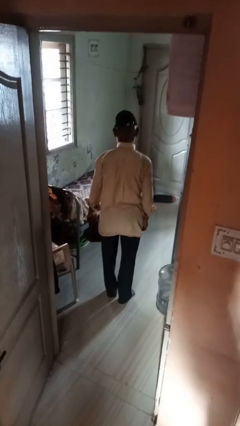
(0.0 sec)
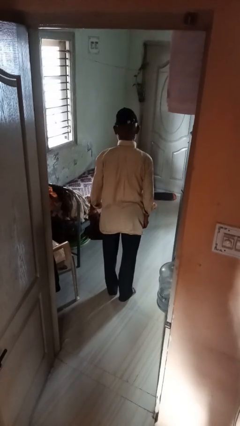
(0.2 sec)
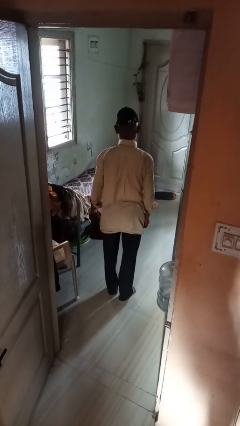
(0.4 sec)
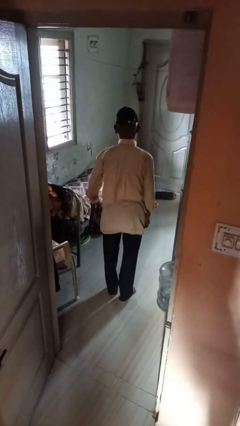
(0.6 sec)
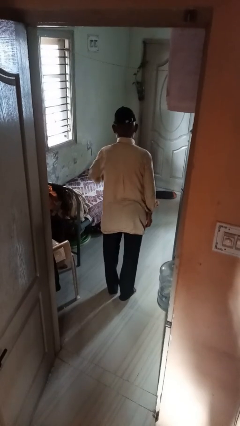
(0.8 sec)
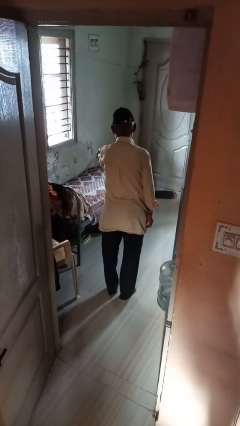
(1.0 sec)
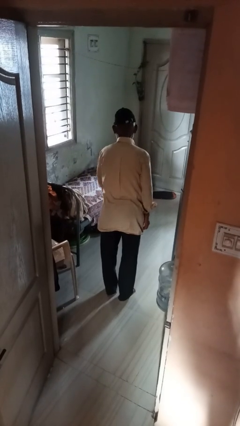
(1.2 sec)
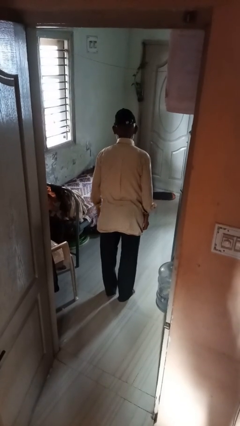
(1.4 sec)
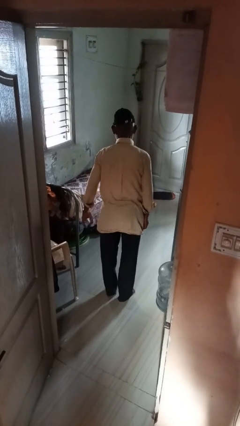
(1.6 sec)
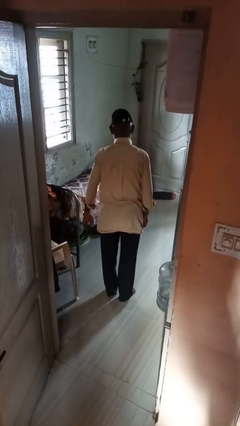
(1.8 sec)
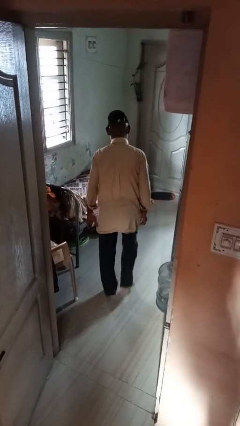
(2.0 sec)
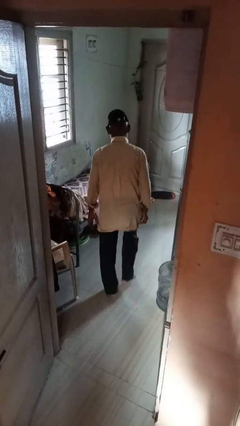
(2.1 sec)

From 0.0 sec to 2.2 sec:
person throws object on bed

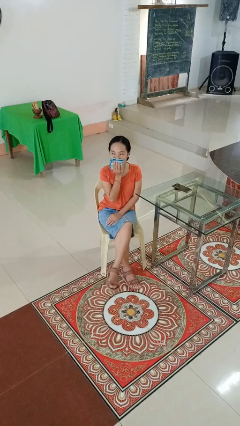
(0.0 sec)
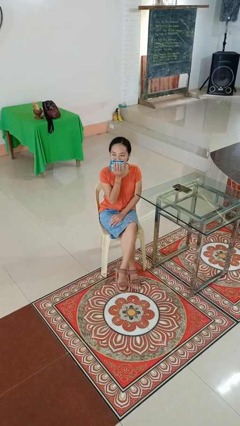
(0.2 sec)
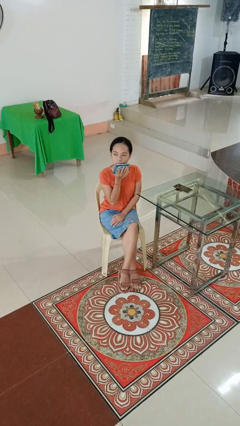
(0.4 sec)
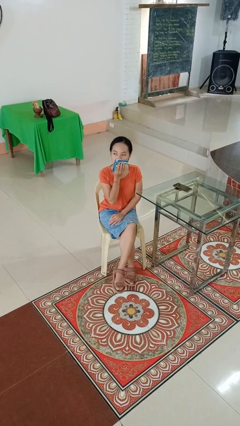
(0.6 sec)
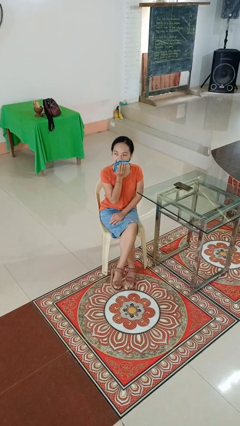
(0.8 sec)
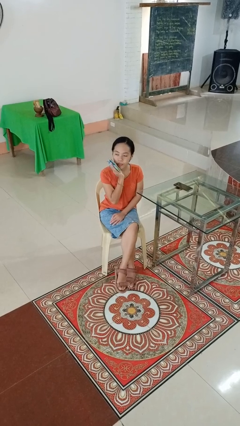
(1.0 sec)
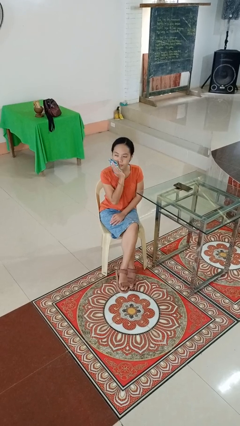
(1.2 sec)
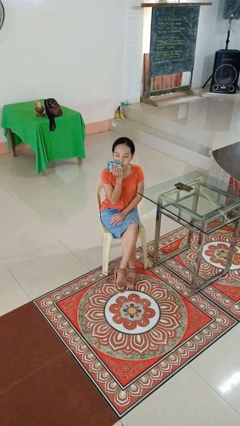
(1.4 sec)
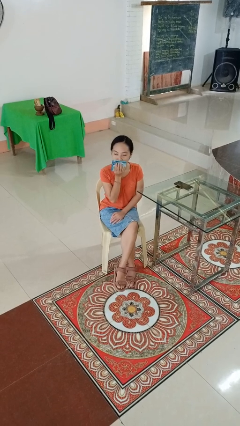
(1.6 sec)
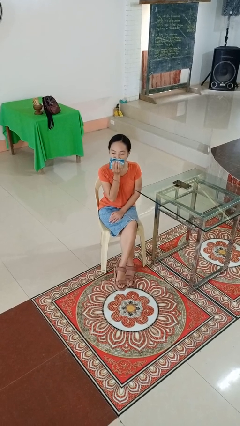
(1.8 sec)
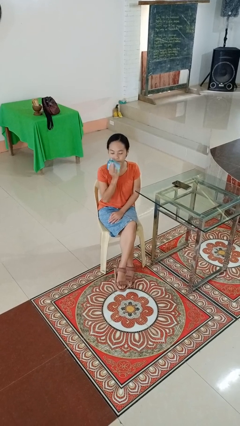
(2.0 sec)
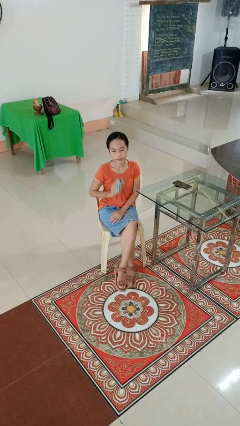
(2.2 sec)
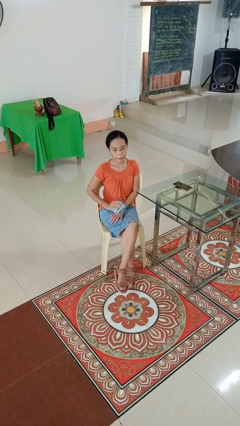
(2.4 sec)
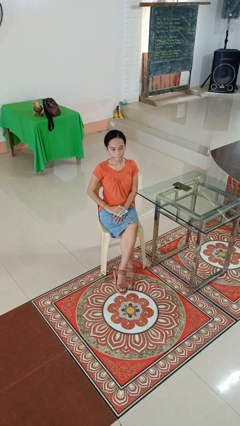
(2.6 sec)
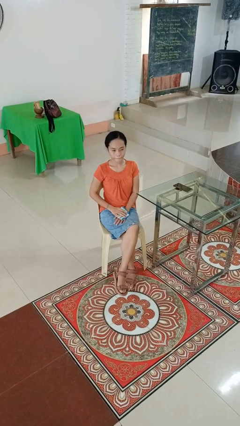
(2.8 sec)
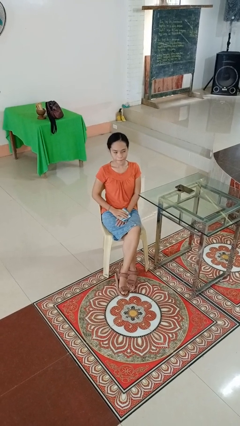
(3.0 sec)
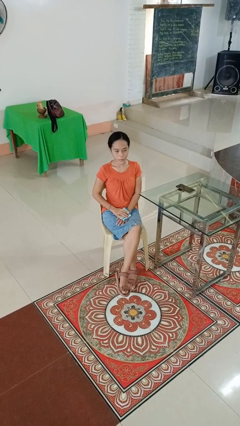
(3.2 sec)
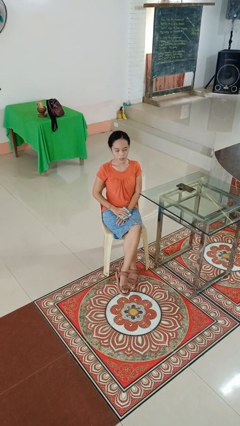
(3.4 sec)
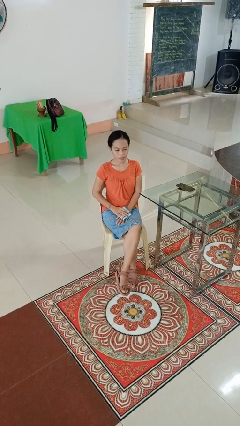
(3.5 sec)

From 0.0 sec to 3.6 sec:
person wipes mouth with napkin

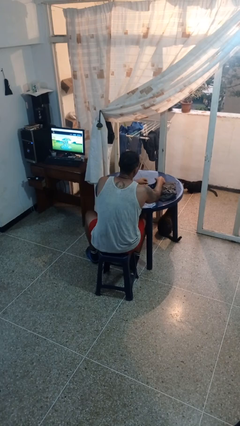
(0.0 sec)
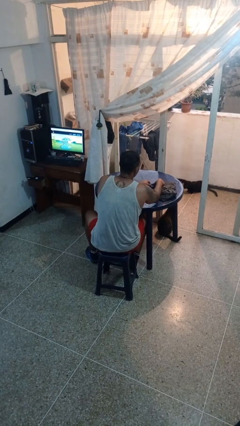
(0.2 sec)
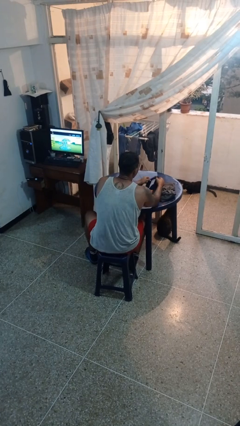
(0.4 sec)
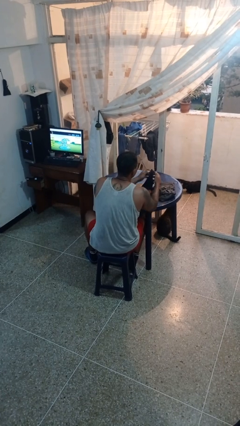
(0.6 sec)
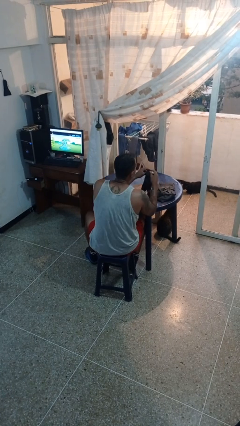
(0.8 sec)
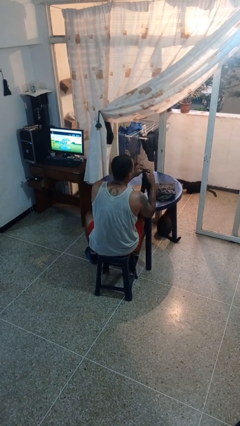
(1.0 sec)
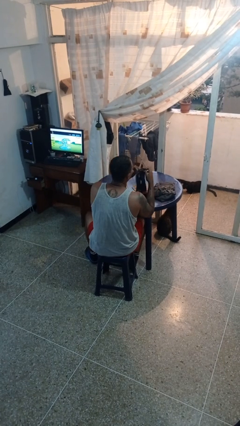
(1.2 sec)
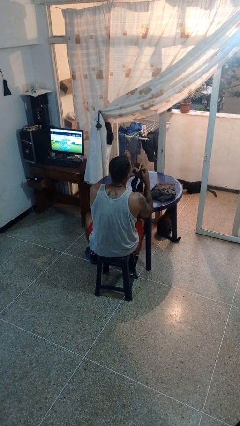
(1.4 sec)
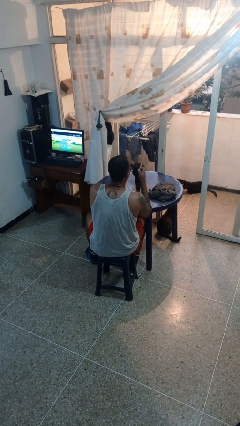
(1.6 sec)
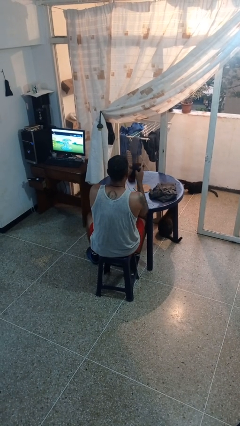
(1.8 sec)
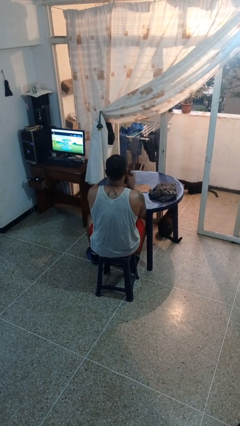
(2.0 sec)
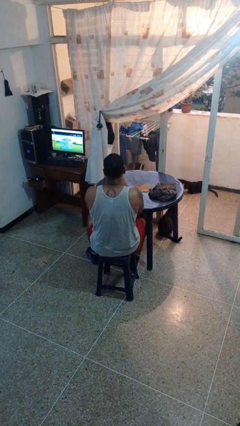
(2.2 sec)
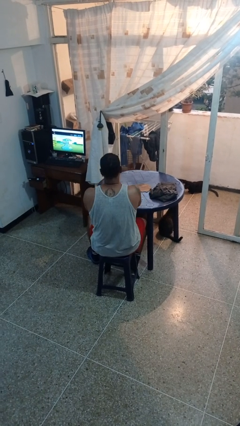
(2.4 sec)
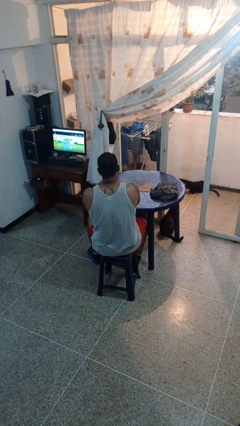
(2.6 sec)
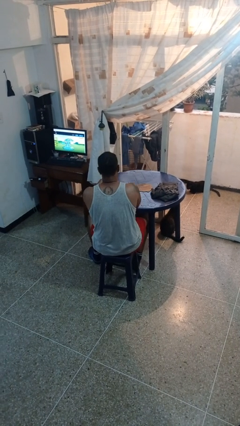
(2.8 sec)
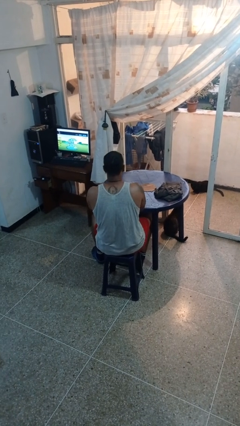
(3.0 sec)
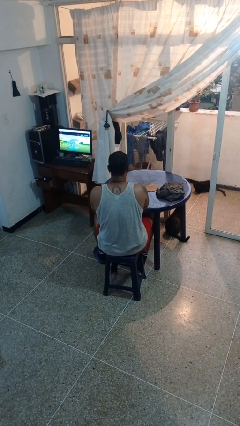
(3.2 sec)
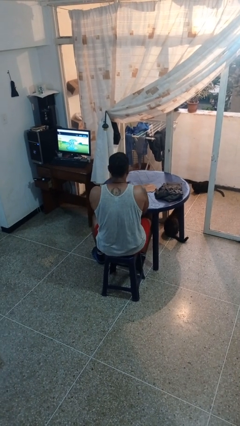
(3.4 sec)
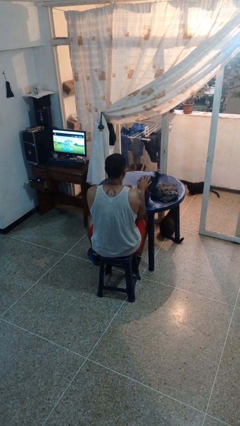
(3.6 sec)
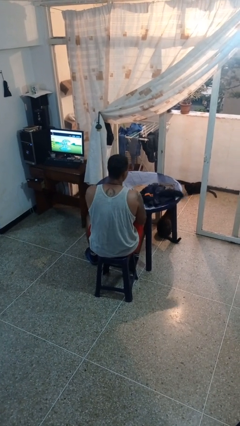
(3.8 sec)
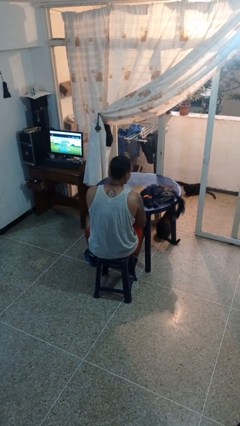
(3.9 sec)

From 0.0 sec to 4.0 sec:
person folds socks

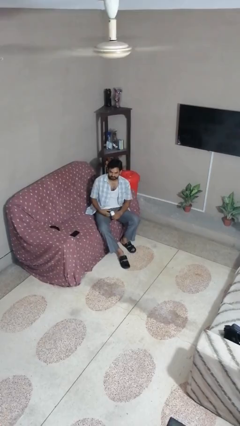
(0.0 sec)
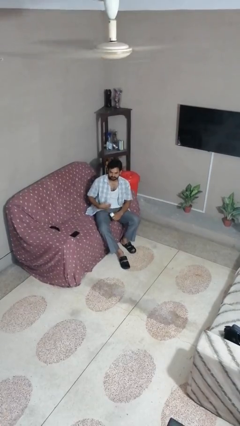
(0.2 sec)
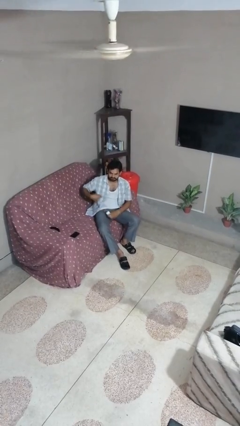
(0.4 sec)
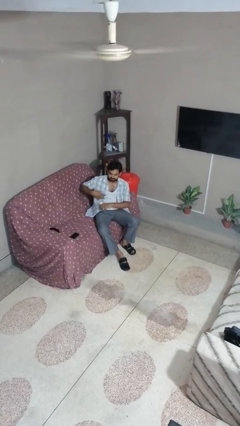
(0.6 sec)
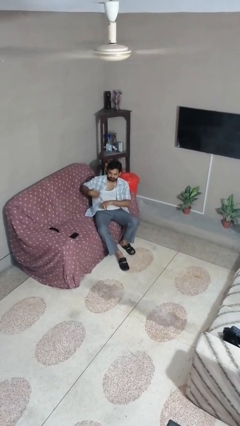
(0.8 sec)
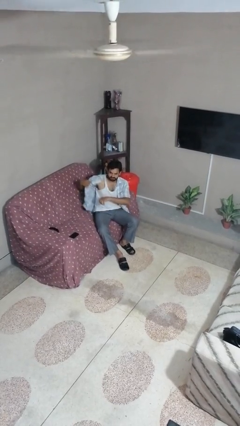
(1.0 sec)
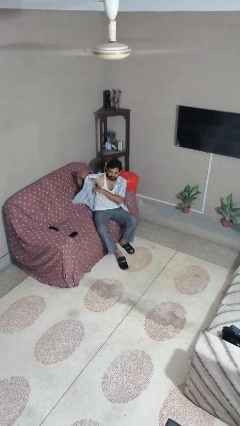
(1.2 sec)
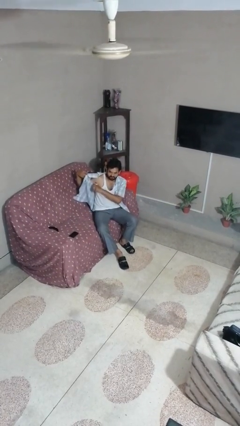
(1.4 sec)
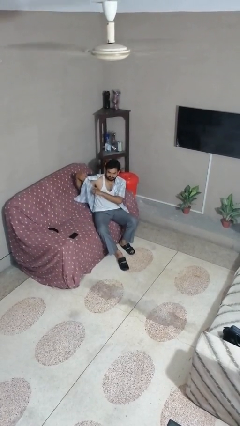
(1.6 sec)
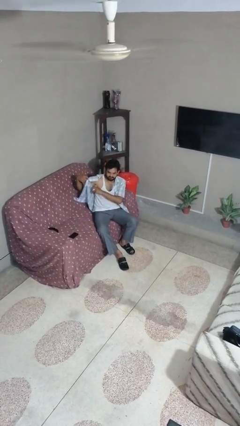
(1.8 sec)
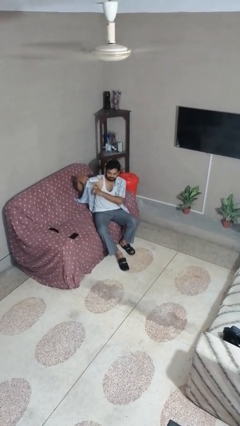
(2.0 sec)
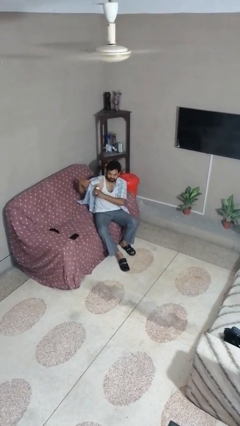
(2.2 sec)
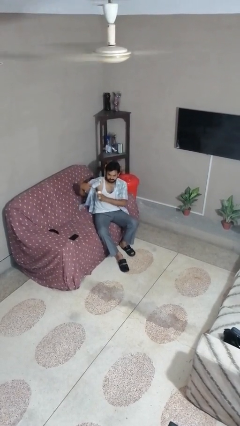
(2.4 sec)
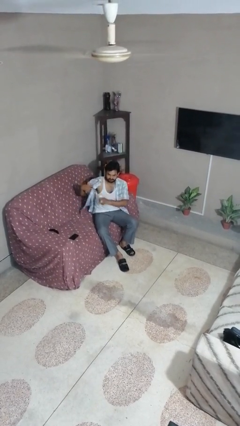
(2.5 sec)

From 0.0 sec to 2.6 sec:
person applies deodorant

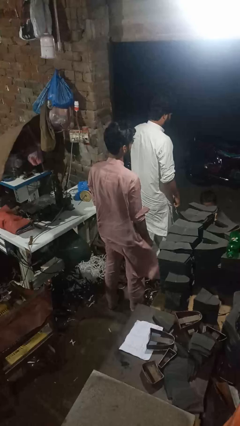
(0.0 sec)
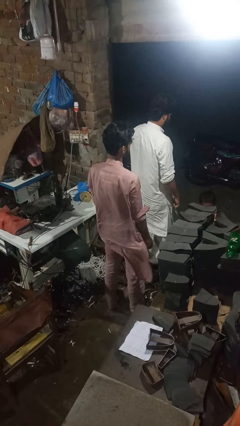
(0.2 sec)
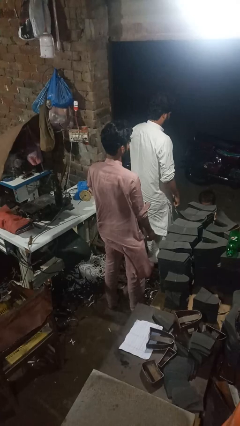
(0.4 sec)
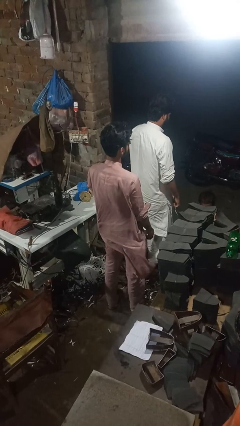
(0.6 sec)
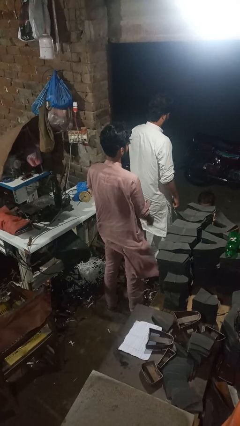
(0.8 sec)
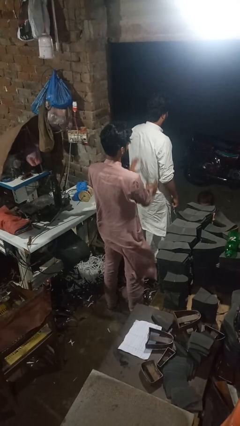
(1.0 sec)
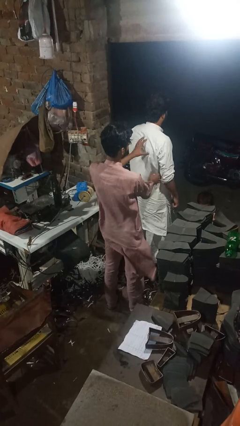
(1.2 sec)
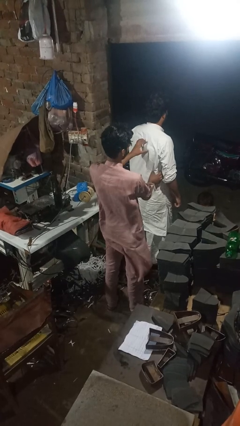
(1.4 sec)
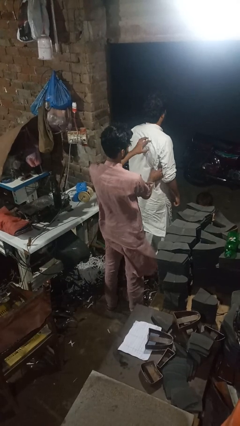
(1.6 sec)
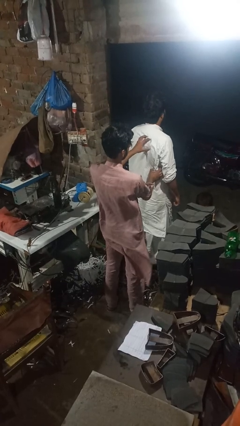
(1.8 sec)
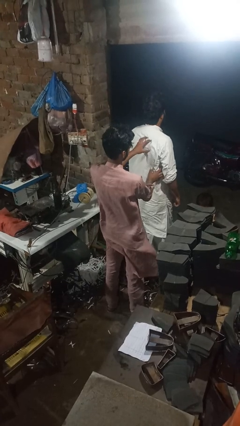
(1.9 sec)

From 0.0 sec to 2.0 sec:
person tickles person

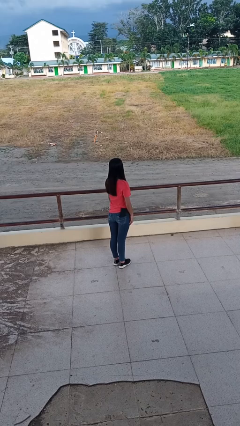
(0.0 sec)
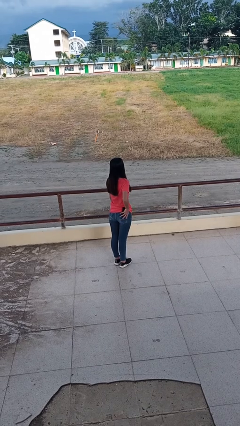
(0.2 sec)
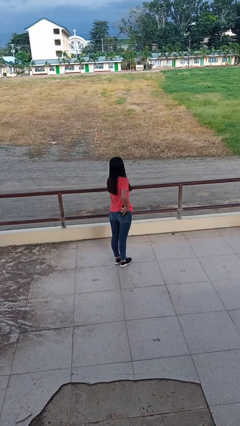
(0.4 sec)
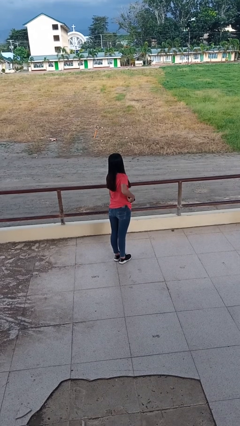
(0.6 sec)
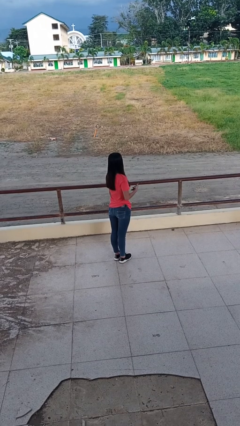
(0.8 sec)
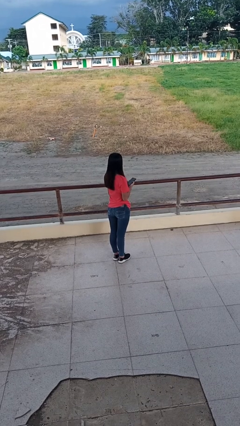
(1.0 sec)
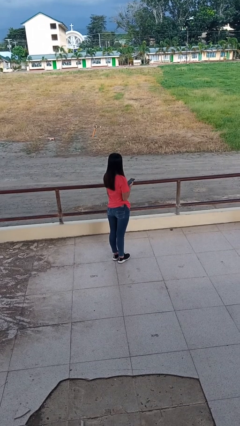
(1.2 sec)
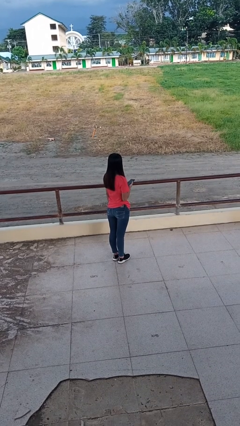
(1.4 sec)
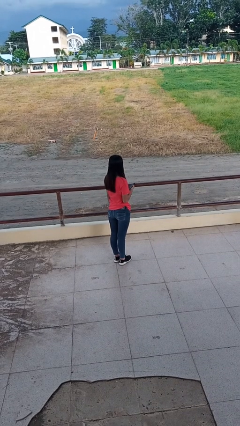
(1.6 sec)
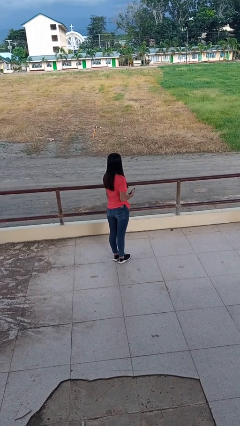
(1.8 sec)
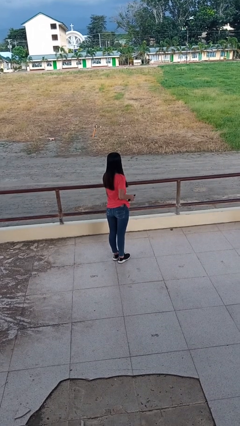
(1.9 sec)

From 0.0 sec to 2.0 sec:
person takes phone from pocket

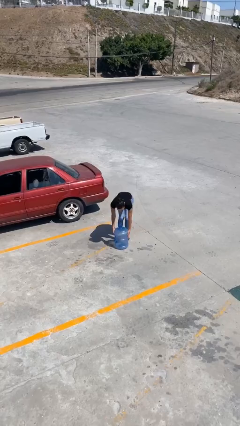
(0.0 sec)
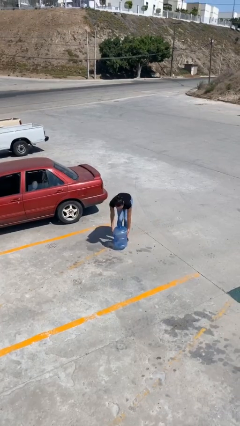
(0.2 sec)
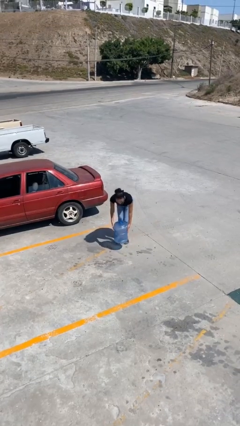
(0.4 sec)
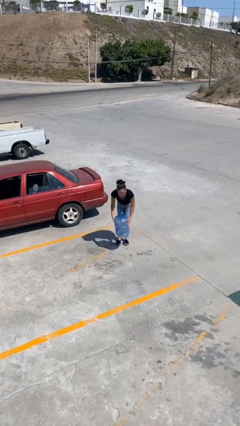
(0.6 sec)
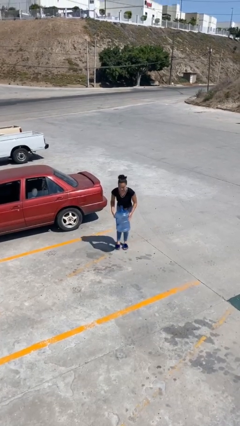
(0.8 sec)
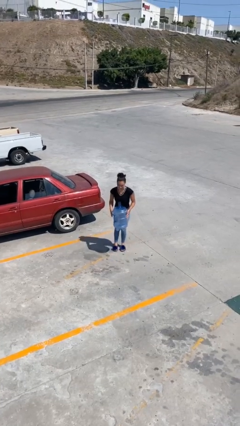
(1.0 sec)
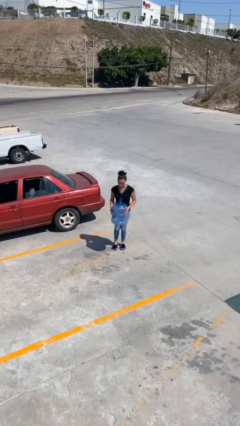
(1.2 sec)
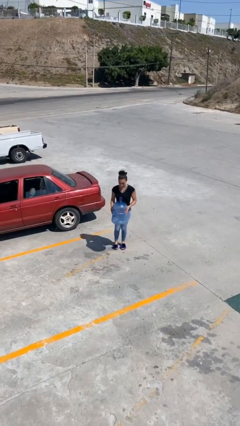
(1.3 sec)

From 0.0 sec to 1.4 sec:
person picks up object from floor
